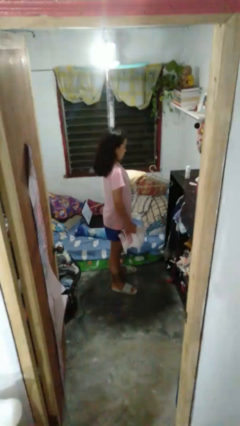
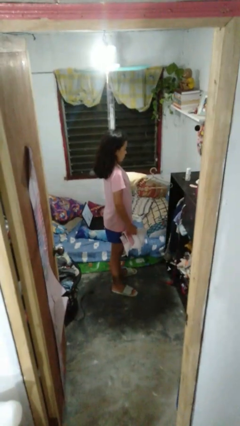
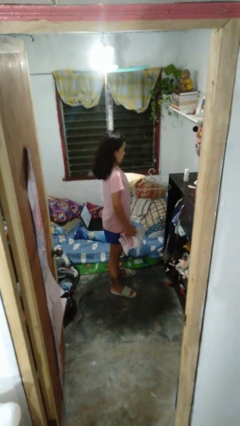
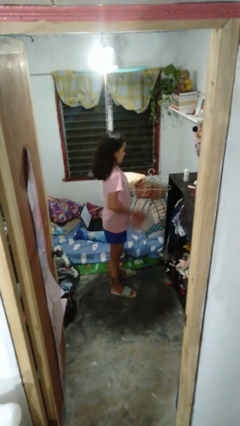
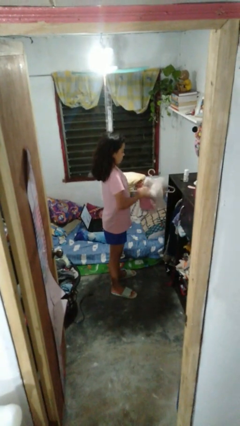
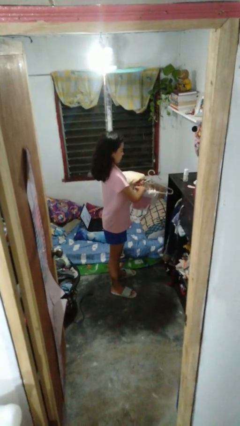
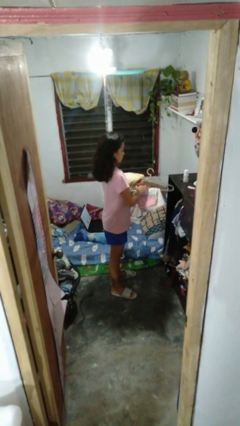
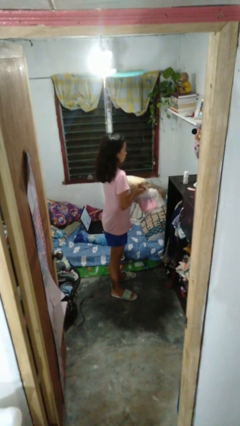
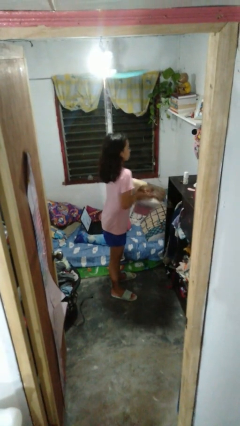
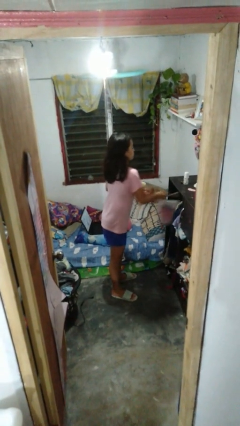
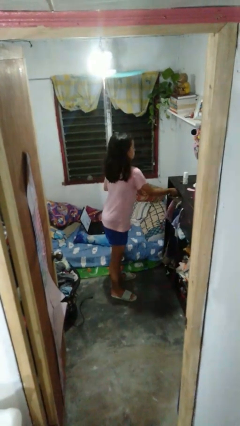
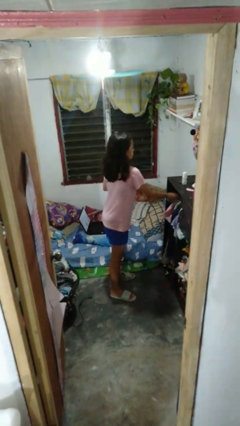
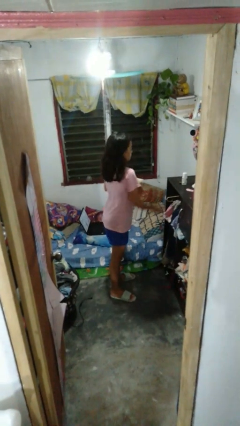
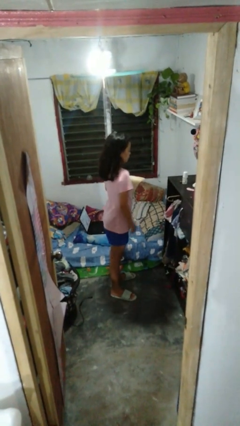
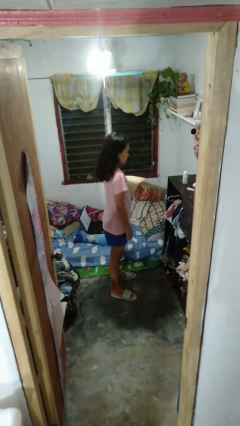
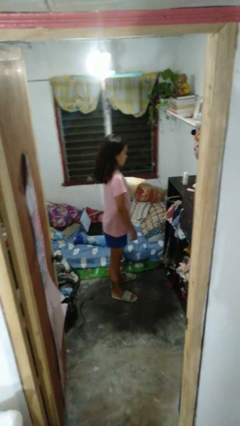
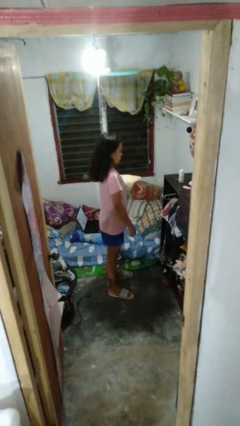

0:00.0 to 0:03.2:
person puts clothes into closet

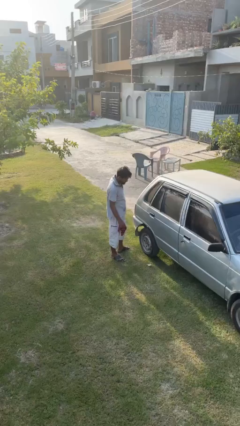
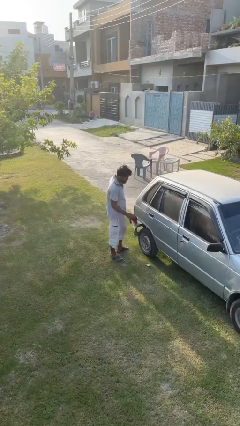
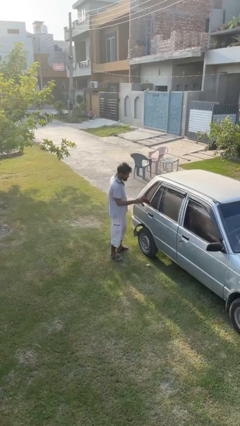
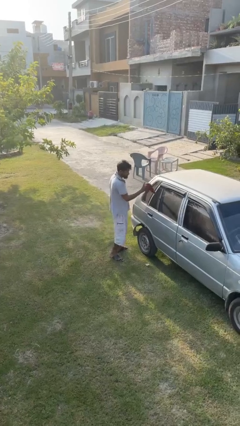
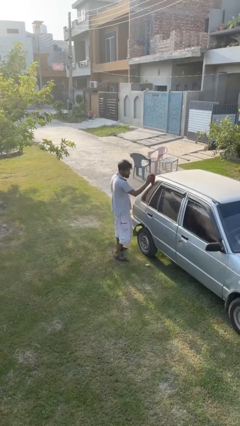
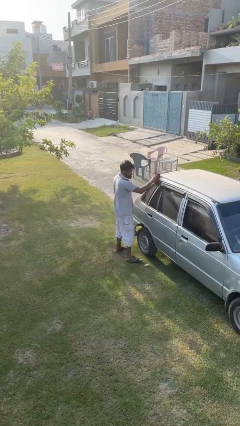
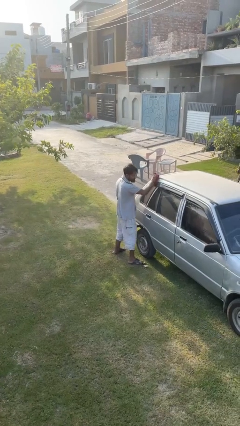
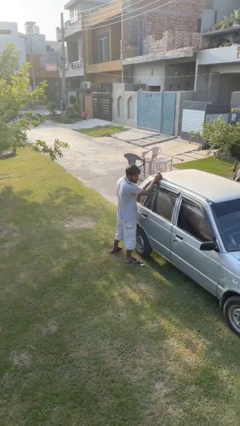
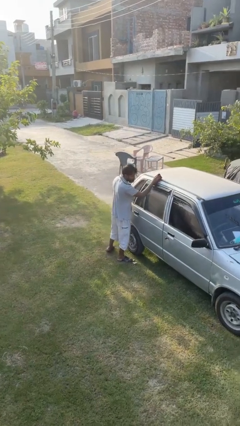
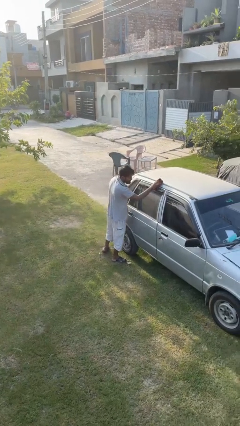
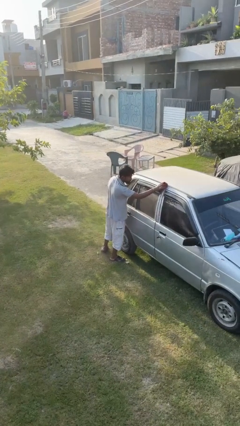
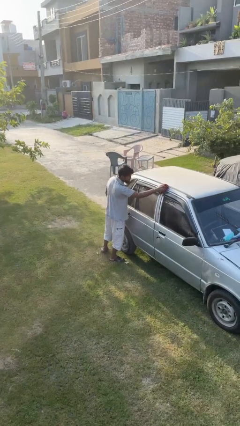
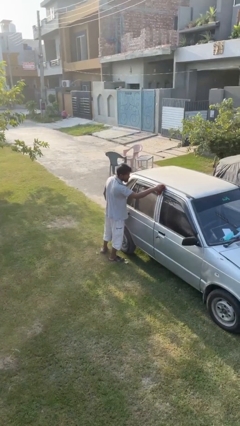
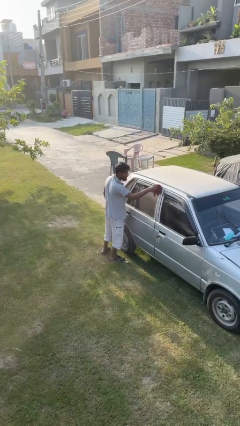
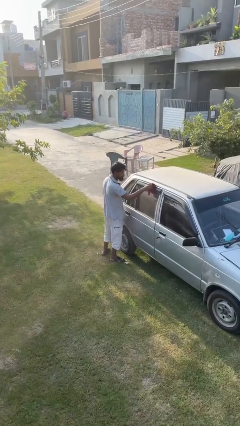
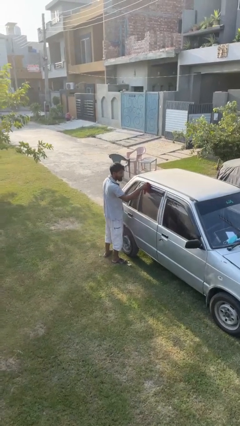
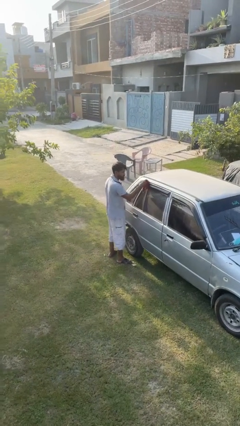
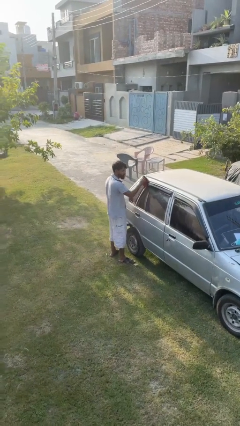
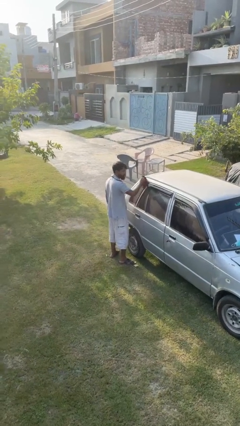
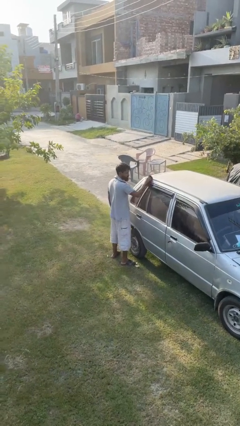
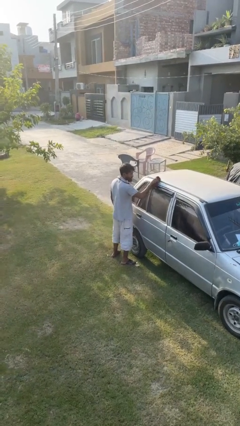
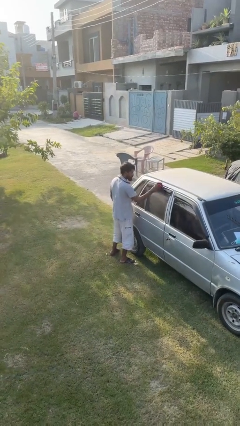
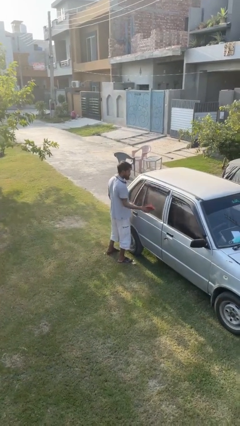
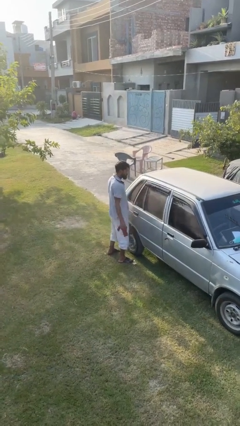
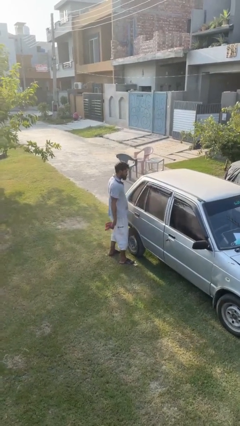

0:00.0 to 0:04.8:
person polishes car with rag

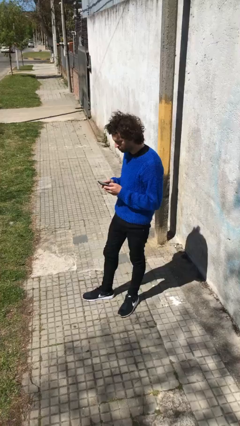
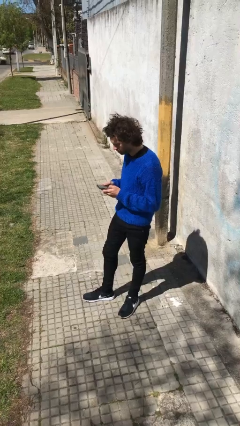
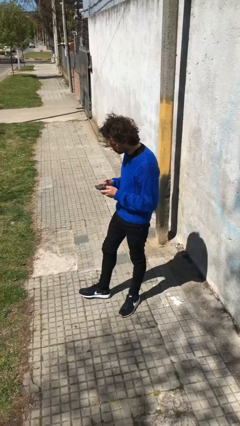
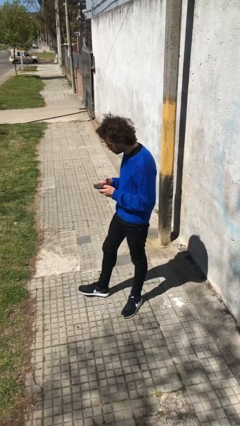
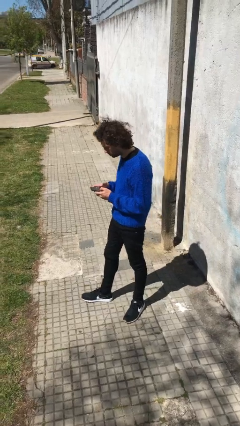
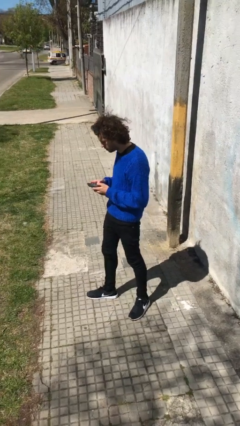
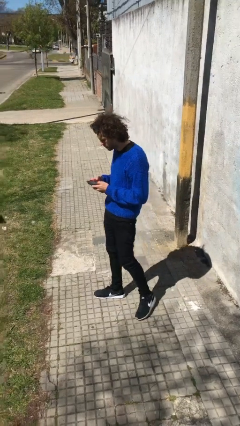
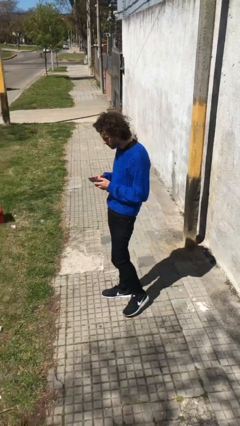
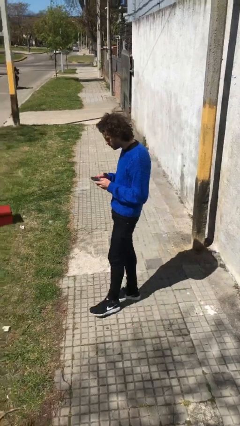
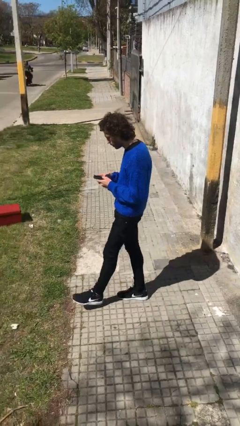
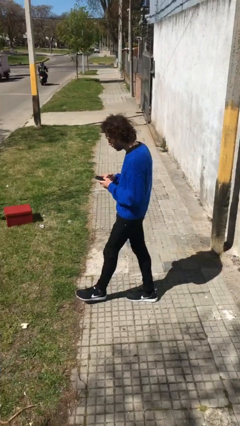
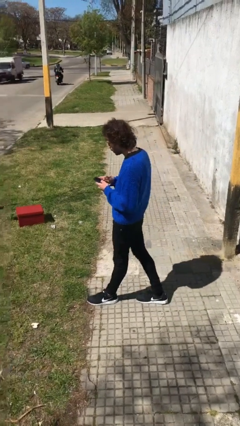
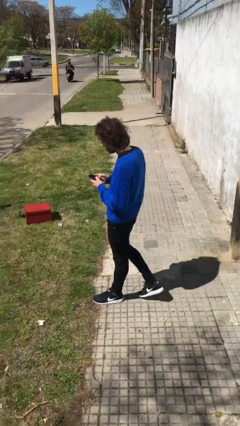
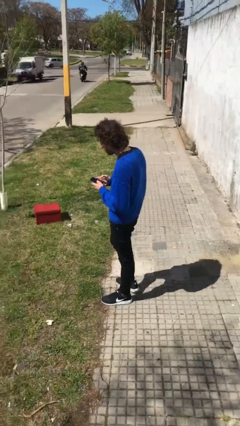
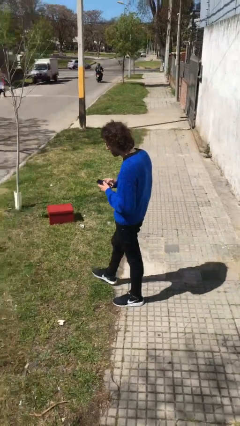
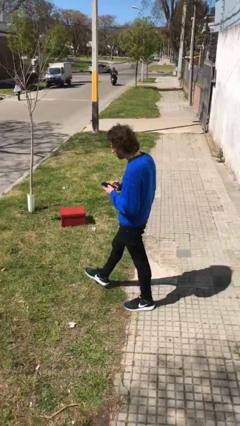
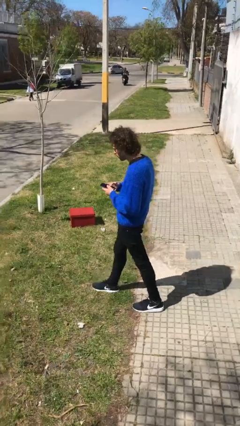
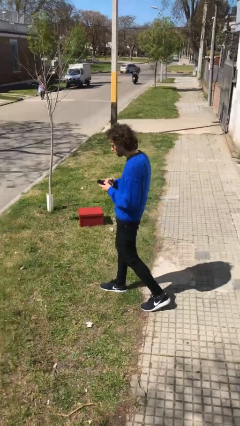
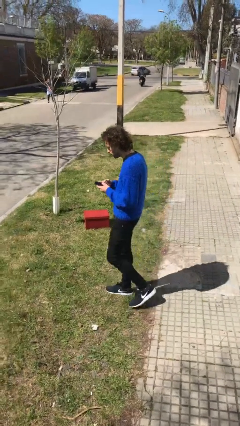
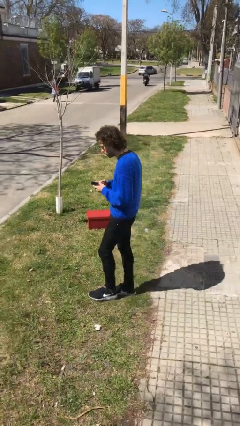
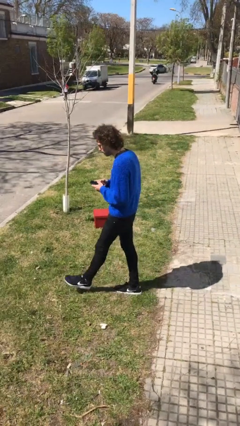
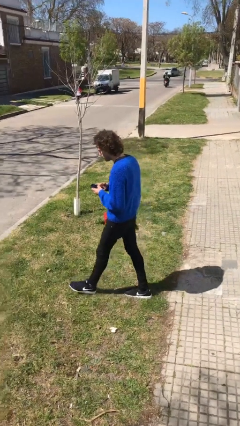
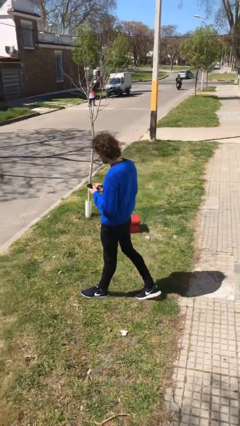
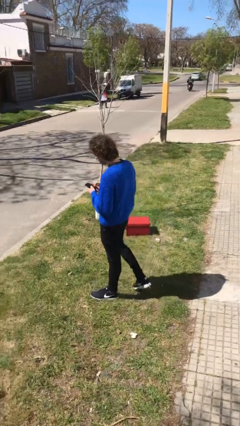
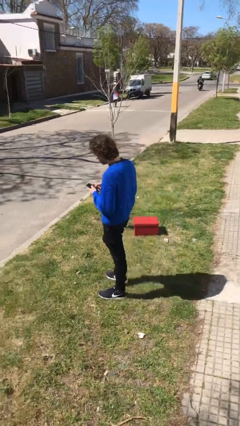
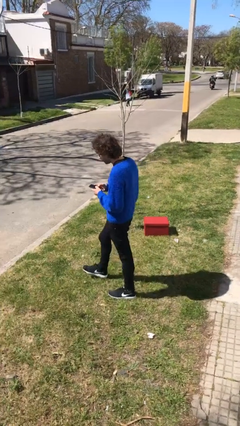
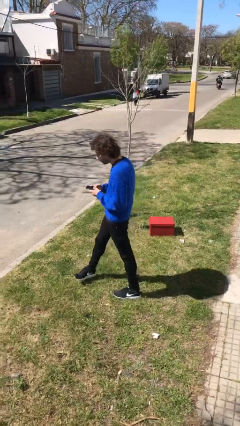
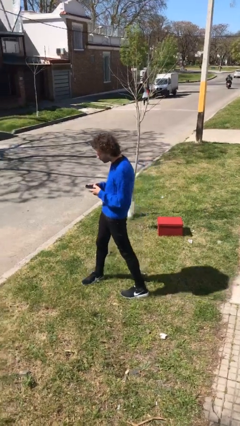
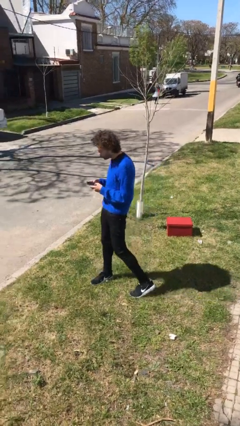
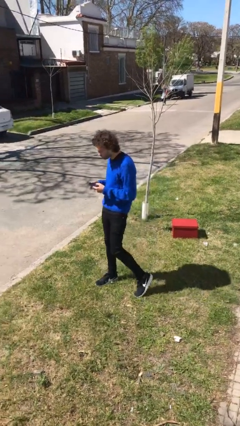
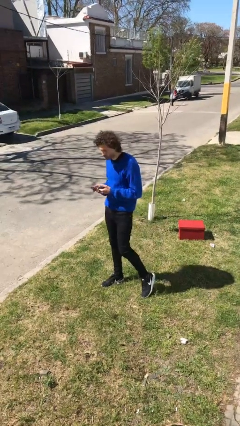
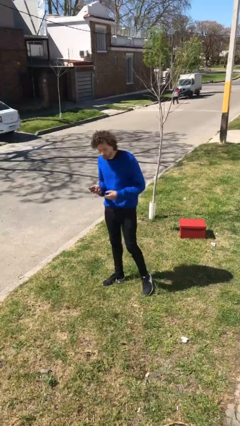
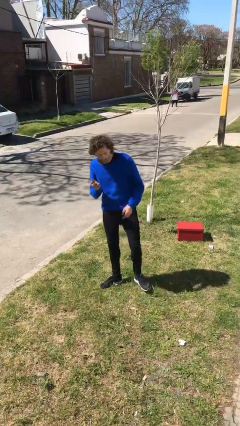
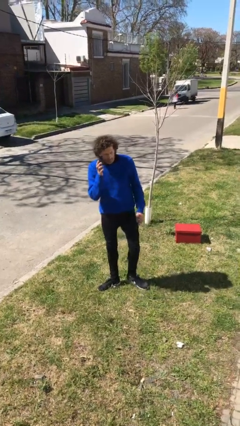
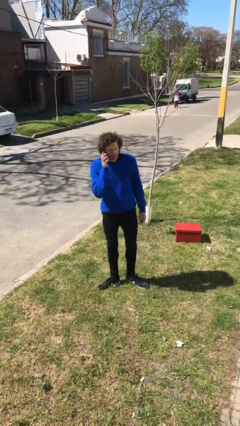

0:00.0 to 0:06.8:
person texts on phone

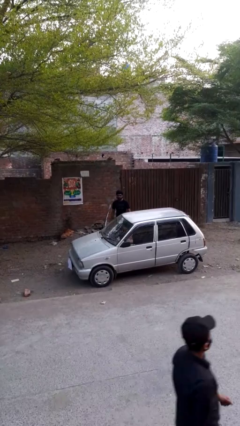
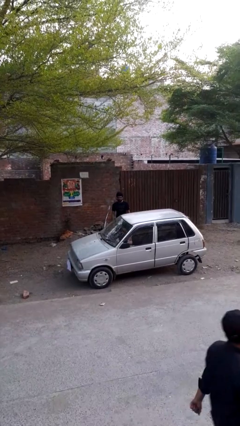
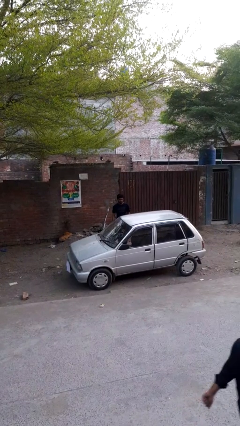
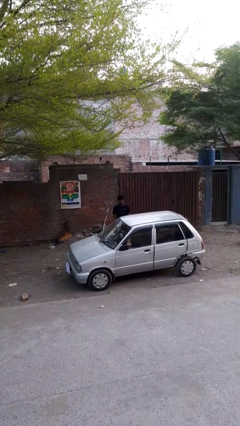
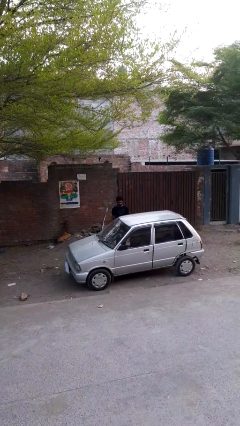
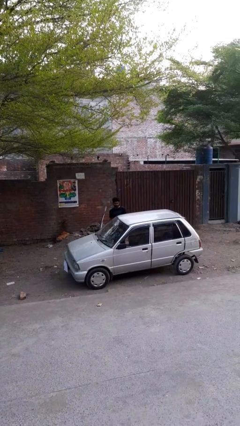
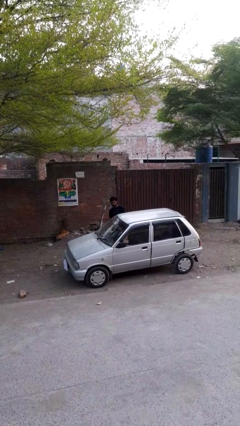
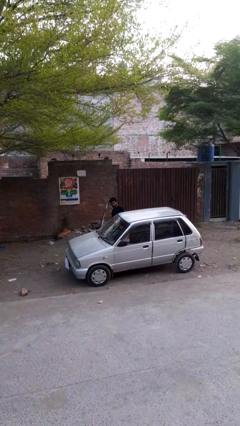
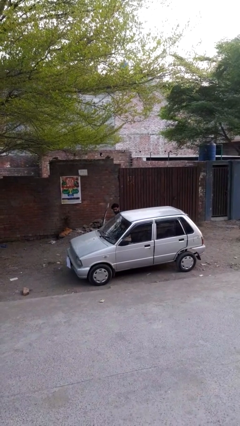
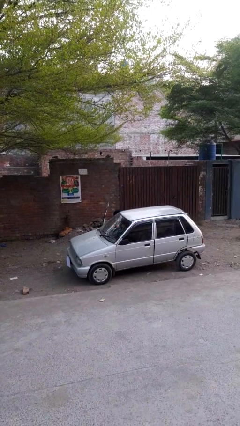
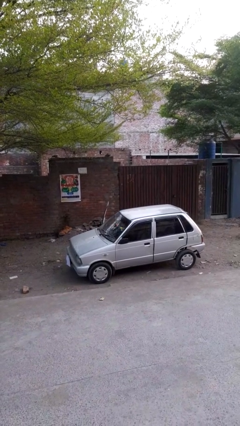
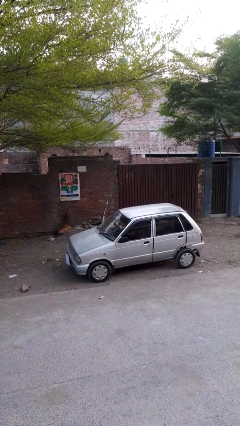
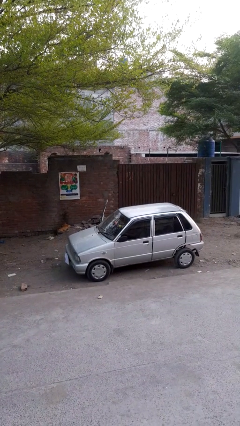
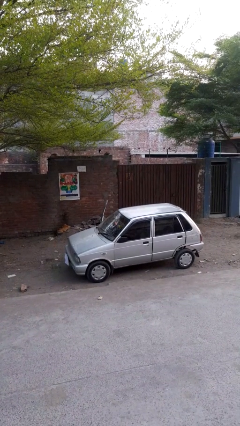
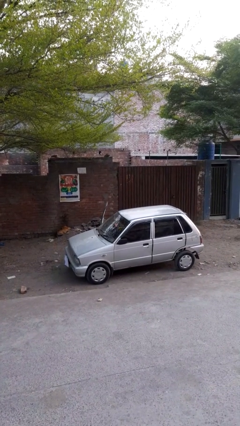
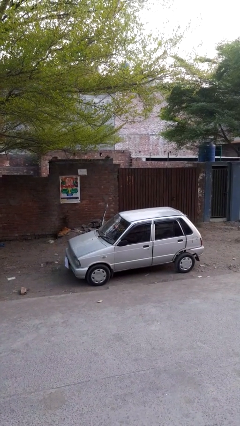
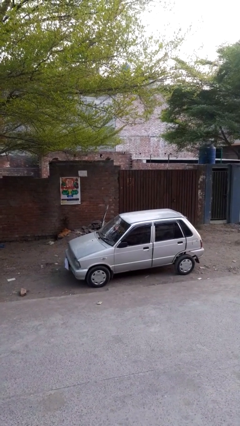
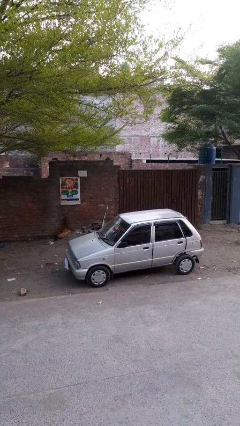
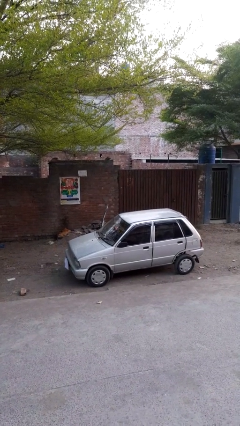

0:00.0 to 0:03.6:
person enters car
